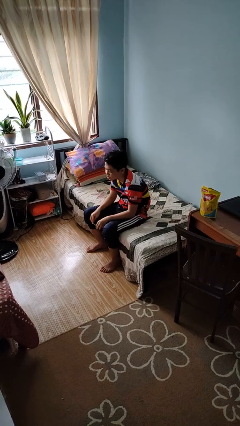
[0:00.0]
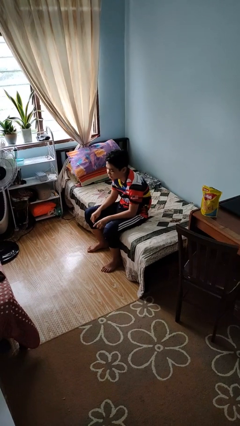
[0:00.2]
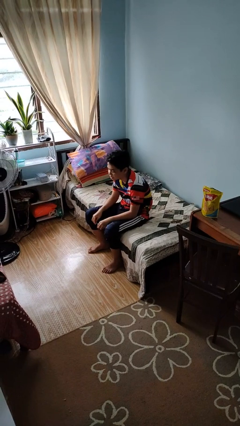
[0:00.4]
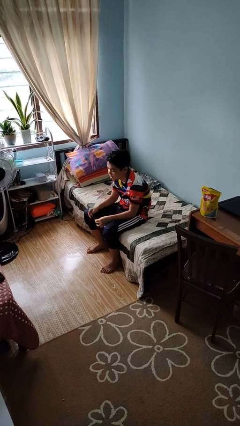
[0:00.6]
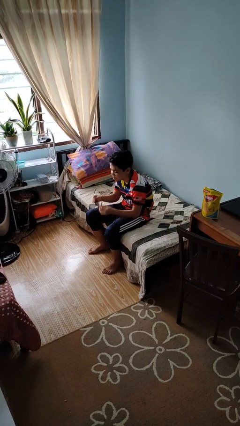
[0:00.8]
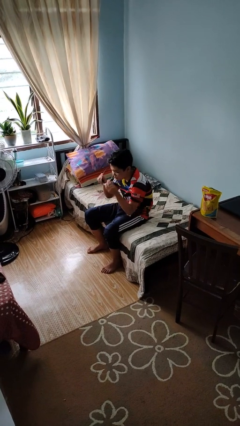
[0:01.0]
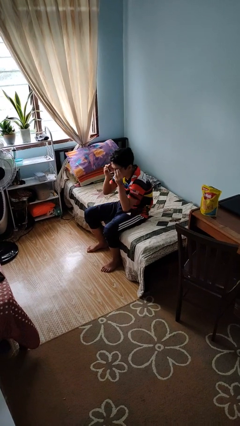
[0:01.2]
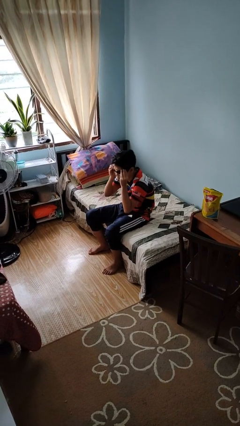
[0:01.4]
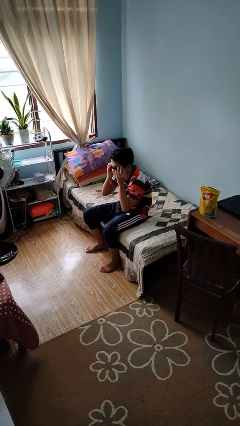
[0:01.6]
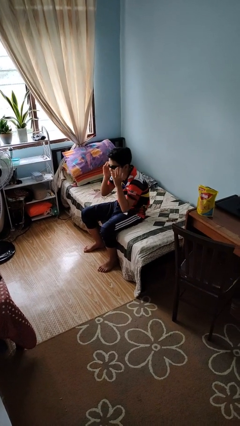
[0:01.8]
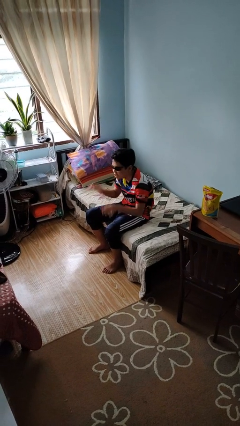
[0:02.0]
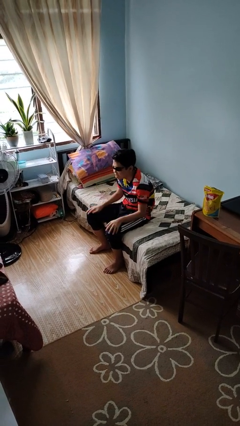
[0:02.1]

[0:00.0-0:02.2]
person puts on glasses

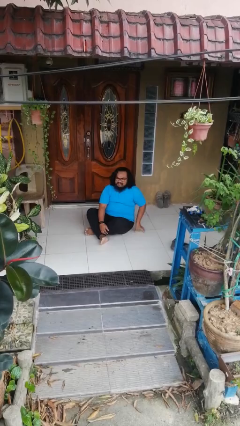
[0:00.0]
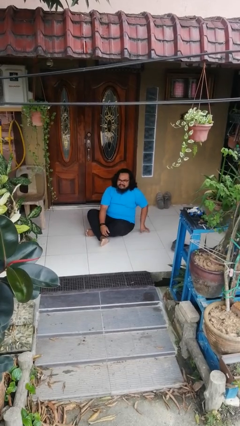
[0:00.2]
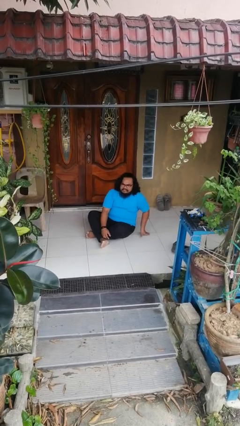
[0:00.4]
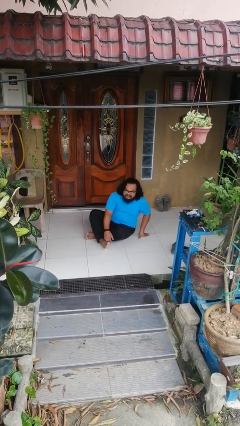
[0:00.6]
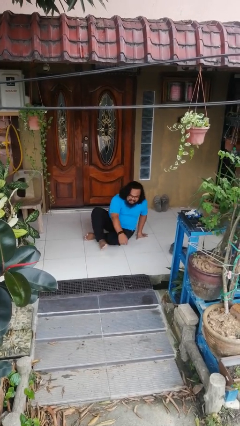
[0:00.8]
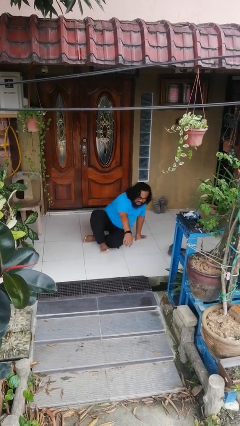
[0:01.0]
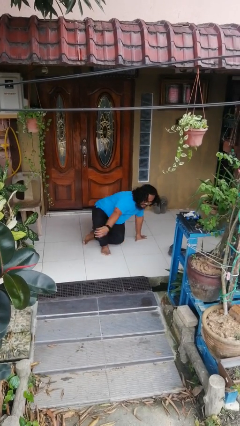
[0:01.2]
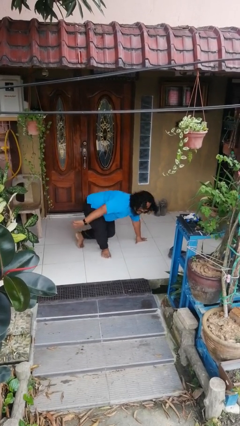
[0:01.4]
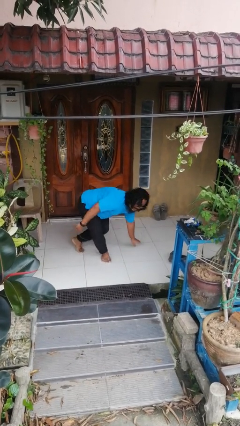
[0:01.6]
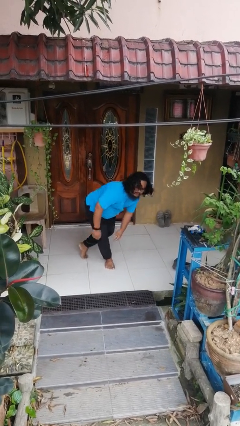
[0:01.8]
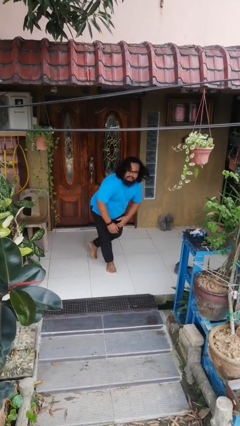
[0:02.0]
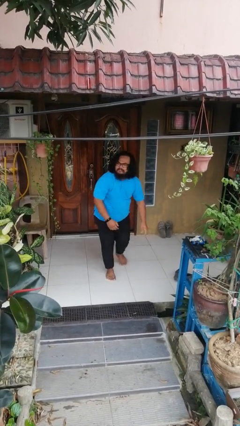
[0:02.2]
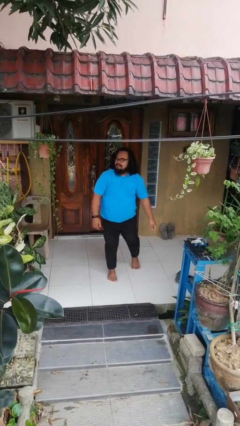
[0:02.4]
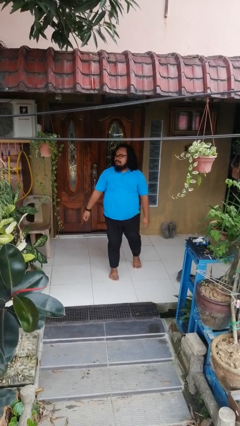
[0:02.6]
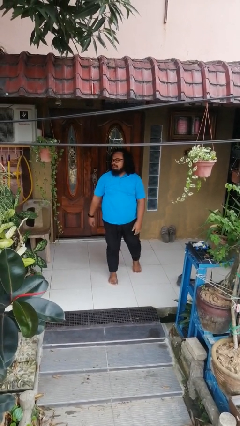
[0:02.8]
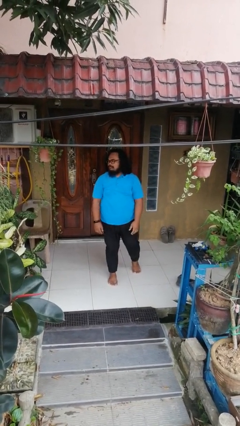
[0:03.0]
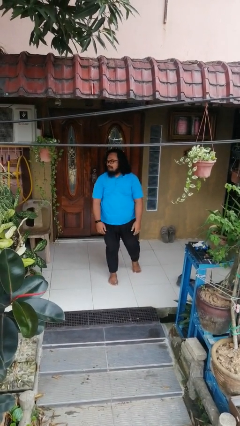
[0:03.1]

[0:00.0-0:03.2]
person stands up from floor

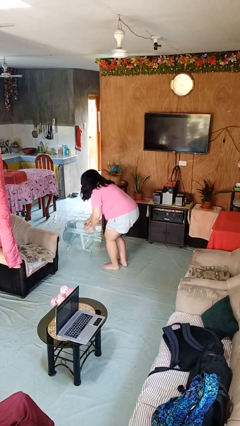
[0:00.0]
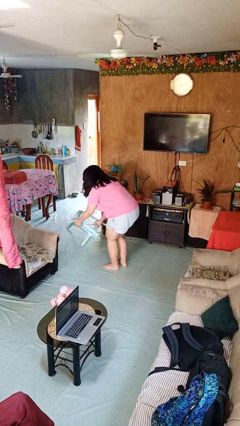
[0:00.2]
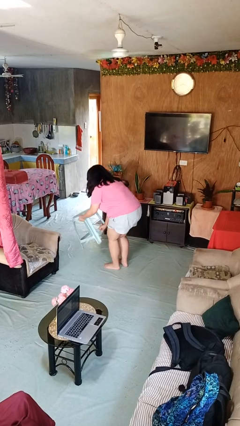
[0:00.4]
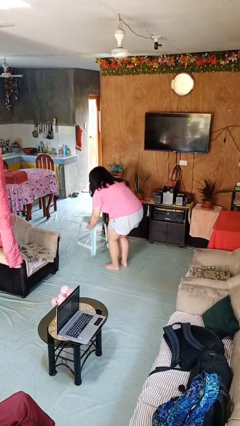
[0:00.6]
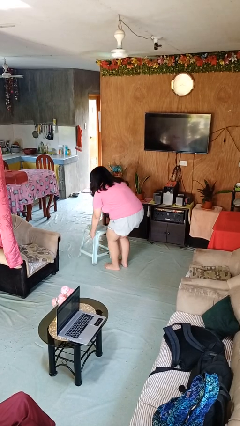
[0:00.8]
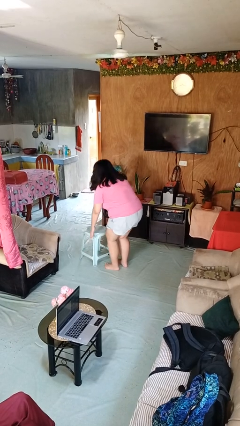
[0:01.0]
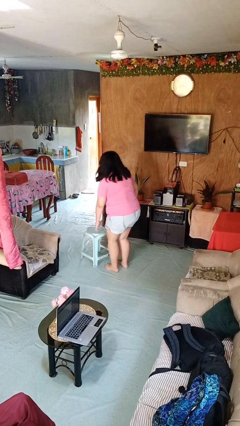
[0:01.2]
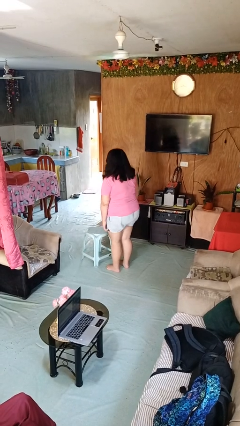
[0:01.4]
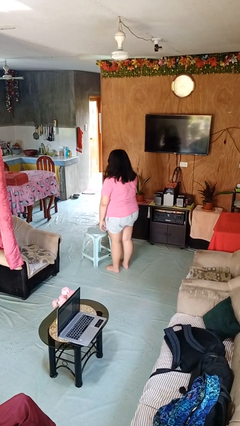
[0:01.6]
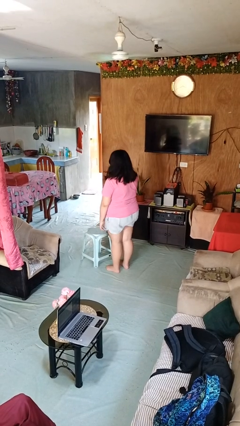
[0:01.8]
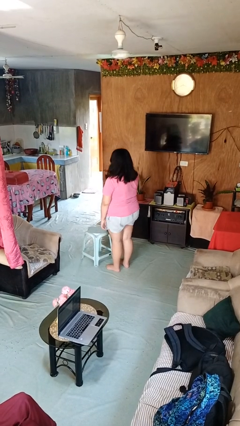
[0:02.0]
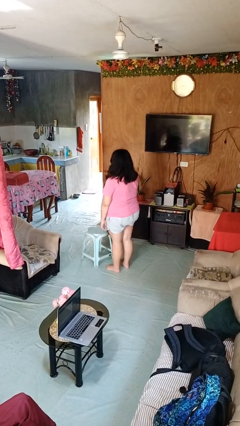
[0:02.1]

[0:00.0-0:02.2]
person sets upright furniture

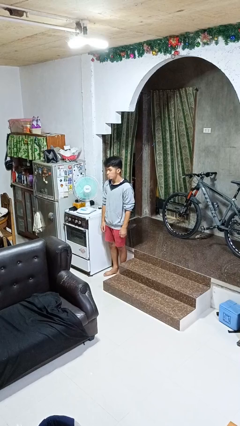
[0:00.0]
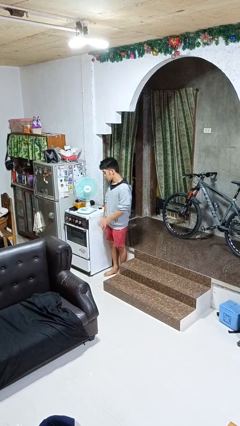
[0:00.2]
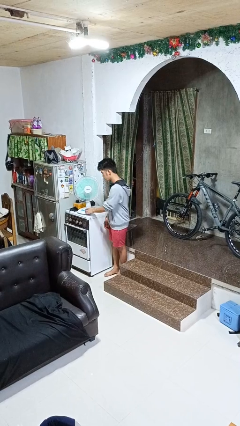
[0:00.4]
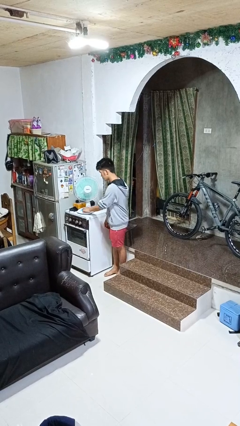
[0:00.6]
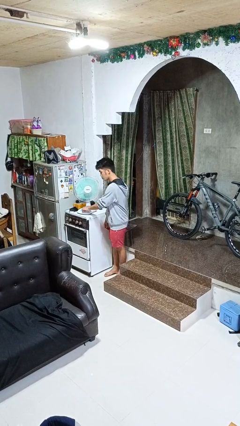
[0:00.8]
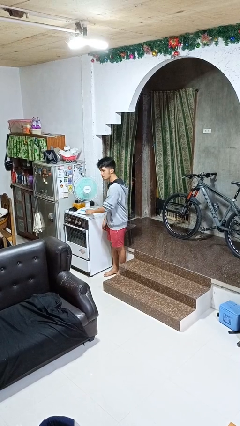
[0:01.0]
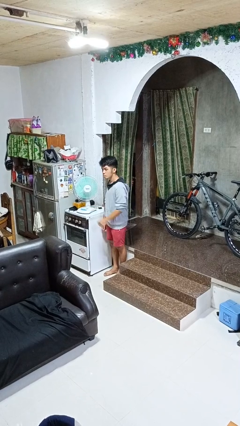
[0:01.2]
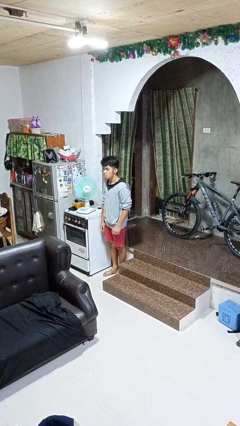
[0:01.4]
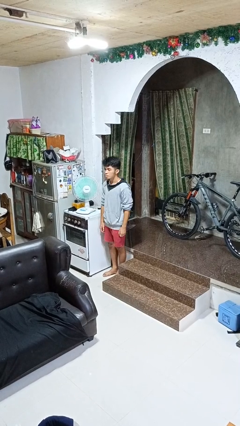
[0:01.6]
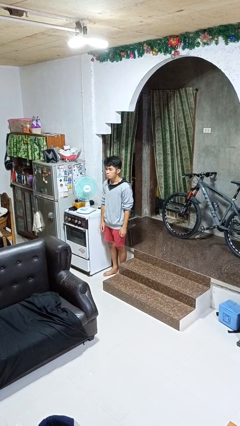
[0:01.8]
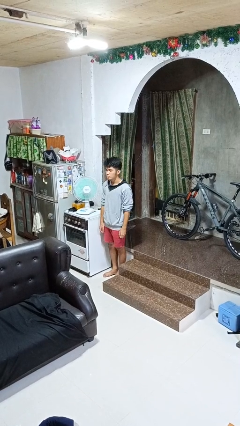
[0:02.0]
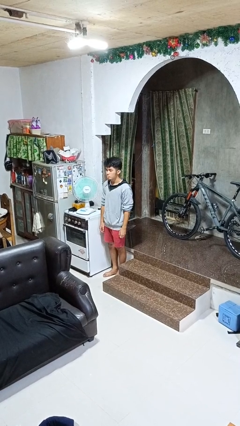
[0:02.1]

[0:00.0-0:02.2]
person turns on fan

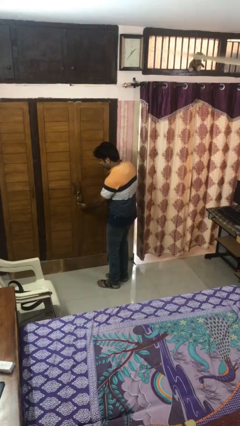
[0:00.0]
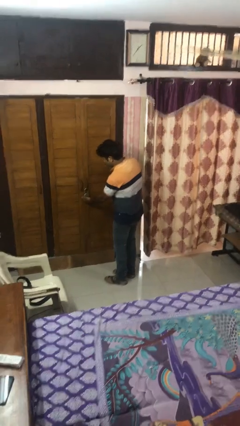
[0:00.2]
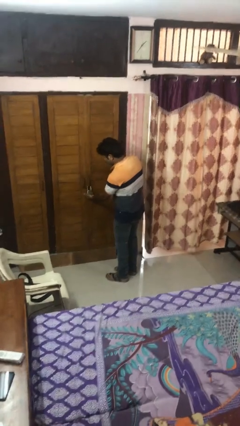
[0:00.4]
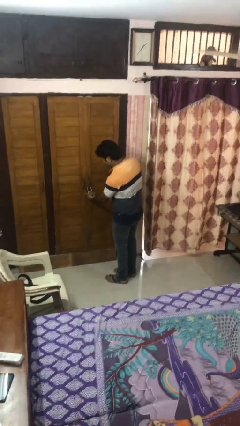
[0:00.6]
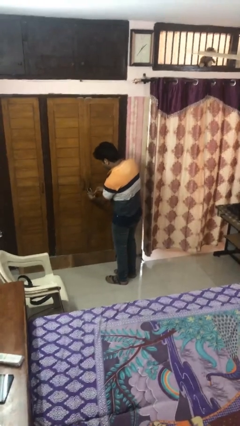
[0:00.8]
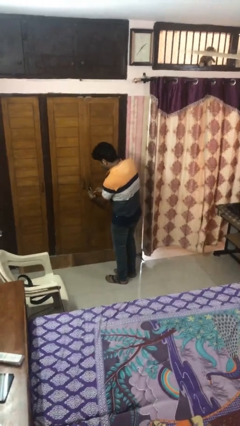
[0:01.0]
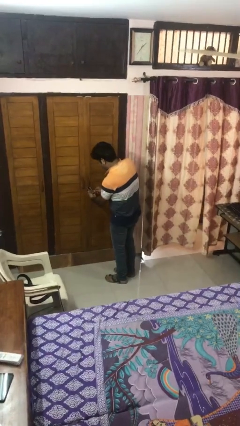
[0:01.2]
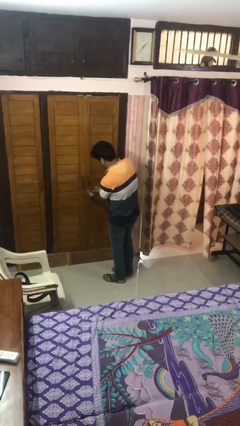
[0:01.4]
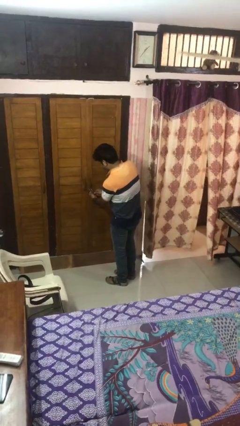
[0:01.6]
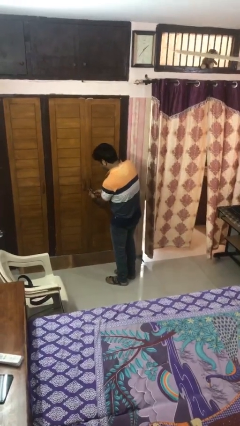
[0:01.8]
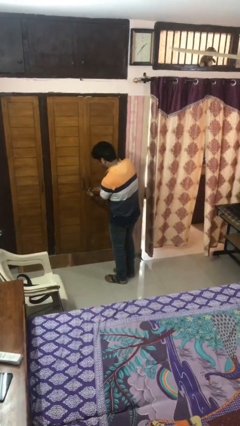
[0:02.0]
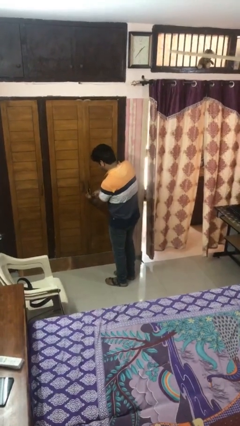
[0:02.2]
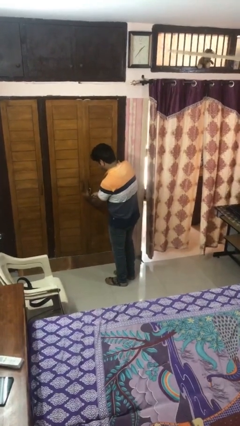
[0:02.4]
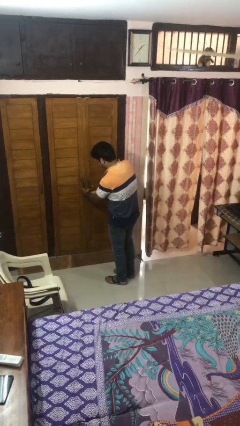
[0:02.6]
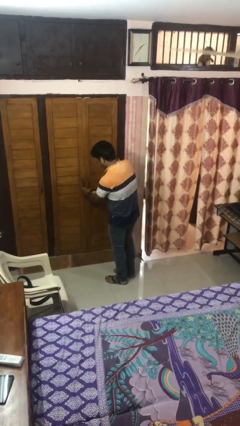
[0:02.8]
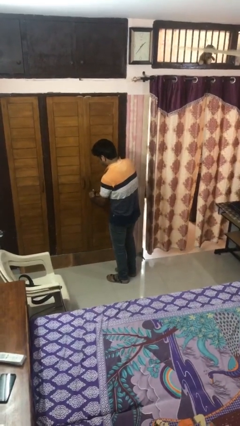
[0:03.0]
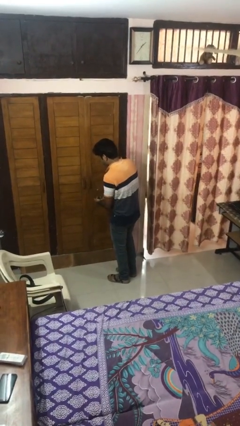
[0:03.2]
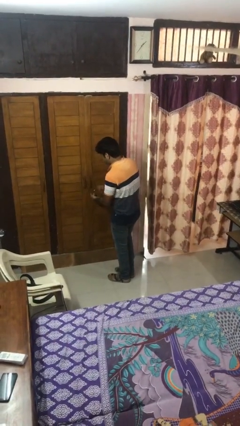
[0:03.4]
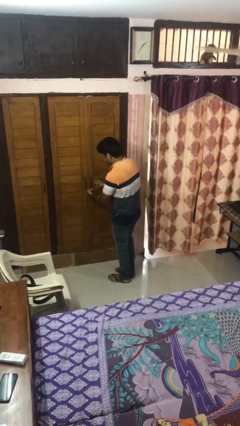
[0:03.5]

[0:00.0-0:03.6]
person unlocks door with keys

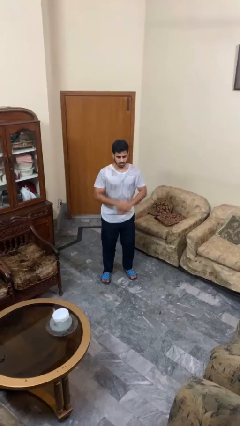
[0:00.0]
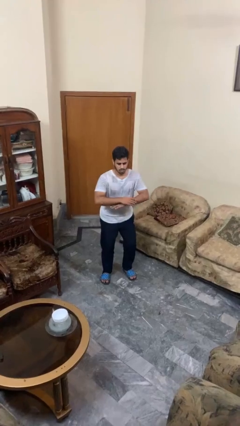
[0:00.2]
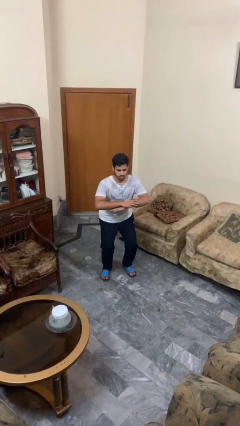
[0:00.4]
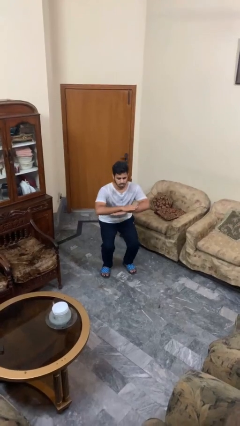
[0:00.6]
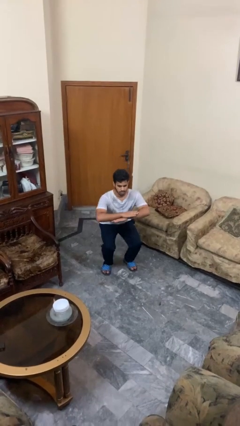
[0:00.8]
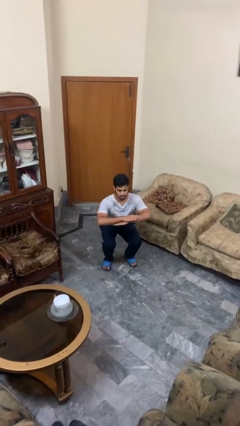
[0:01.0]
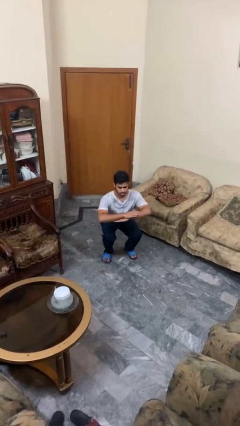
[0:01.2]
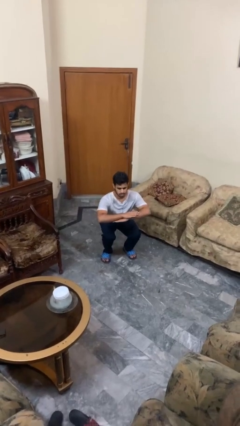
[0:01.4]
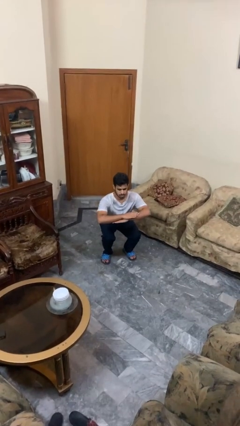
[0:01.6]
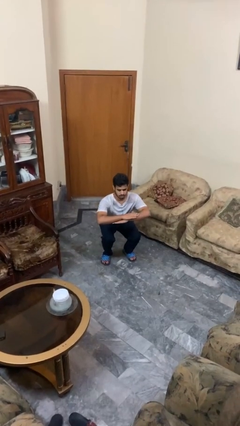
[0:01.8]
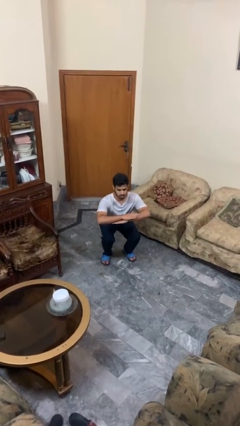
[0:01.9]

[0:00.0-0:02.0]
person squats

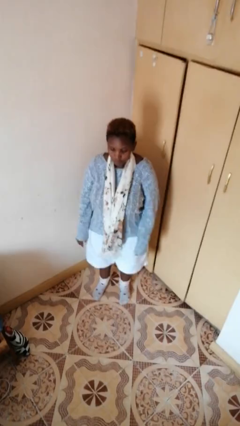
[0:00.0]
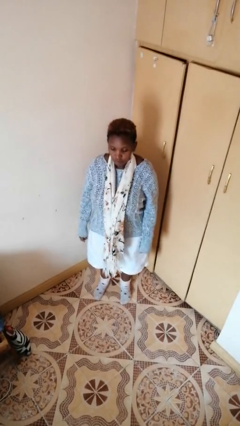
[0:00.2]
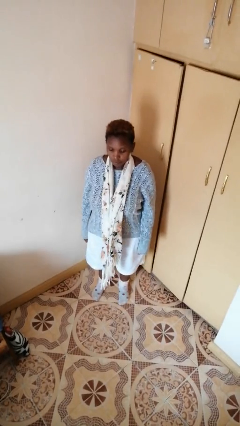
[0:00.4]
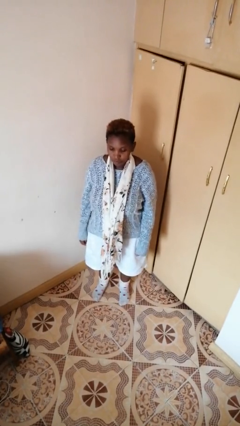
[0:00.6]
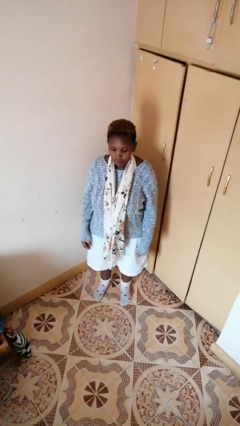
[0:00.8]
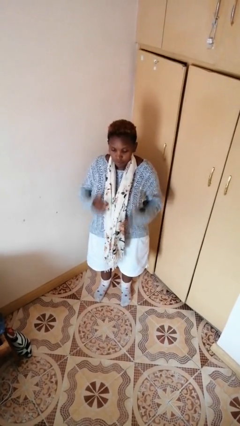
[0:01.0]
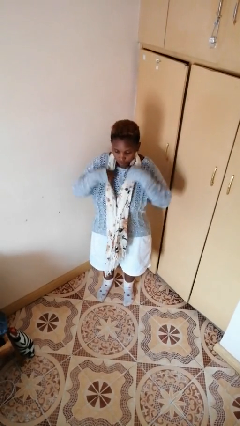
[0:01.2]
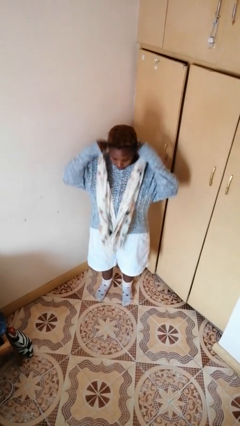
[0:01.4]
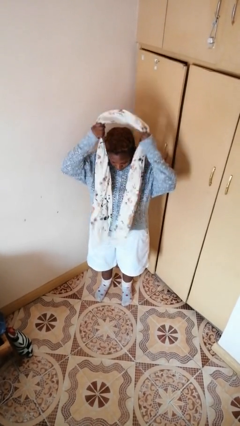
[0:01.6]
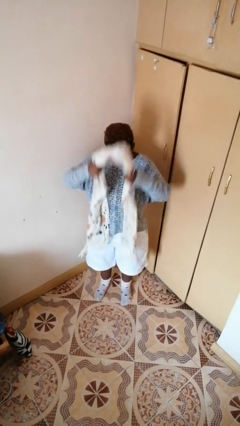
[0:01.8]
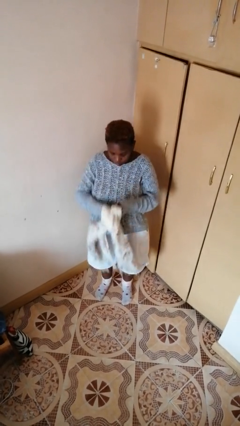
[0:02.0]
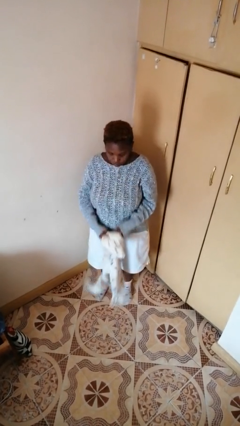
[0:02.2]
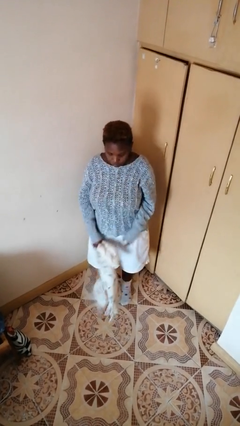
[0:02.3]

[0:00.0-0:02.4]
person takes off scarf
